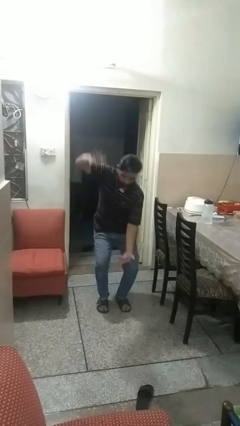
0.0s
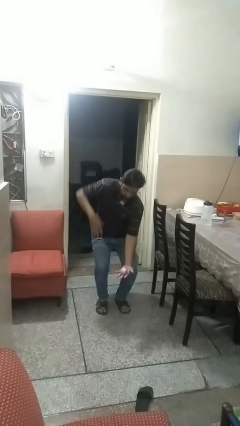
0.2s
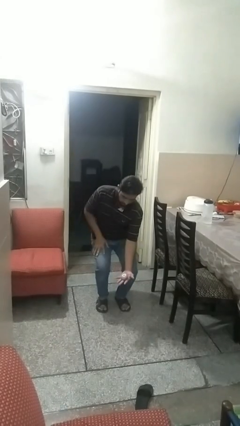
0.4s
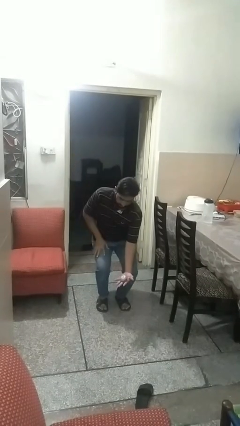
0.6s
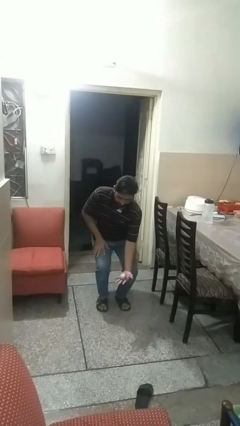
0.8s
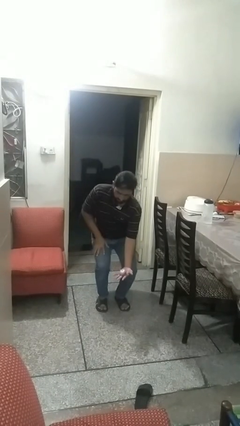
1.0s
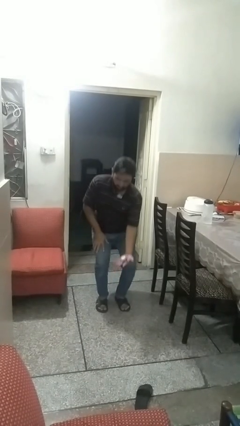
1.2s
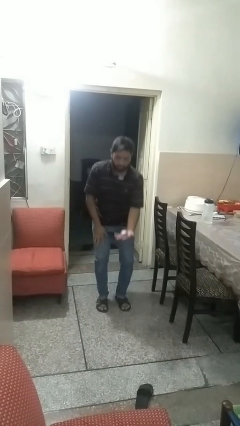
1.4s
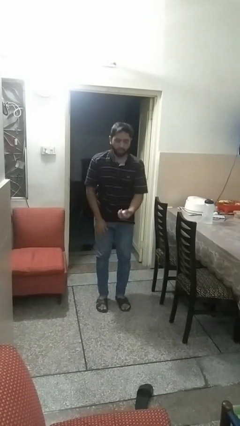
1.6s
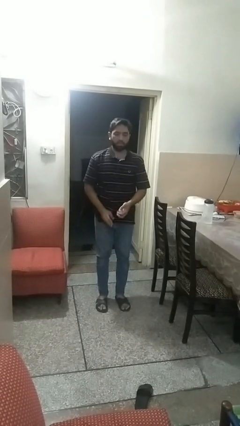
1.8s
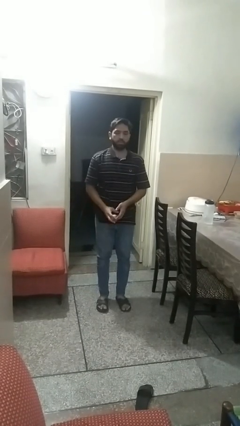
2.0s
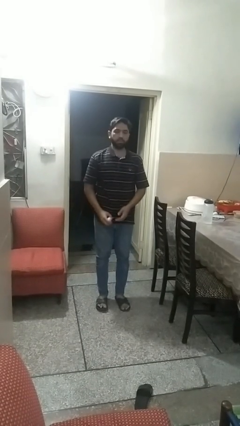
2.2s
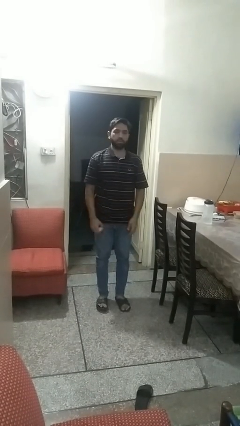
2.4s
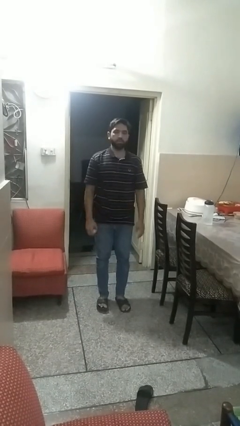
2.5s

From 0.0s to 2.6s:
person catches dropped object

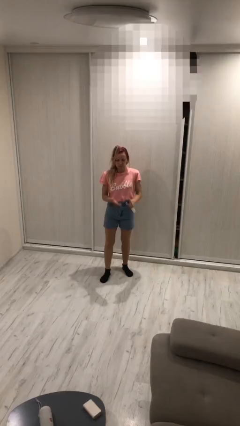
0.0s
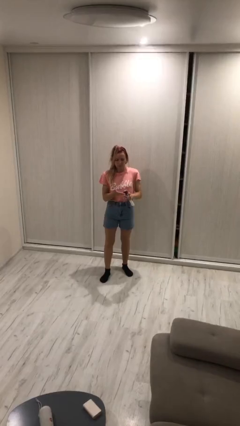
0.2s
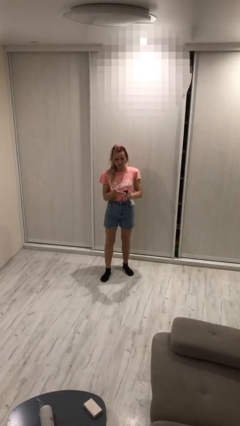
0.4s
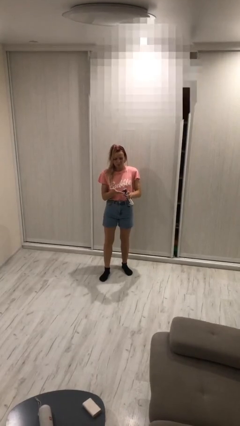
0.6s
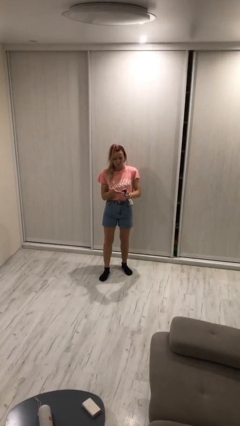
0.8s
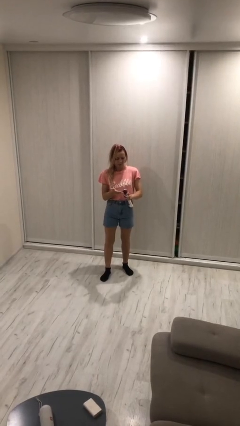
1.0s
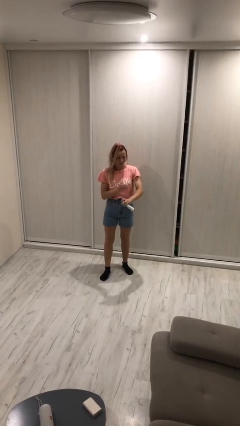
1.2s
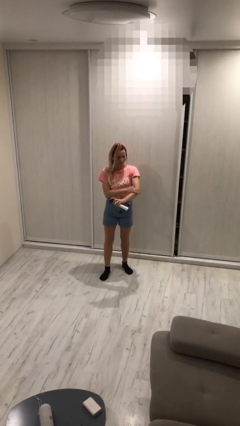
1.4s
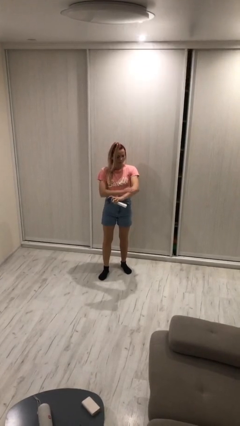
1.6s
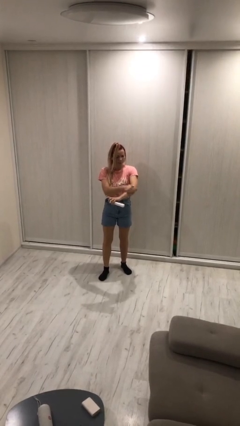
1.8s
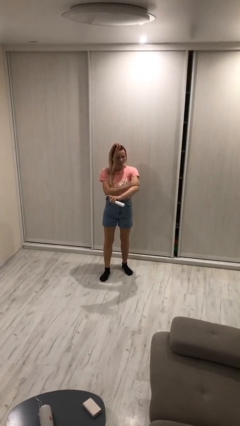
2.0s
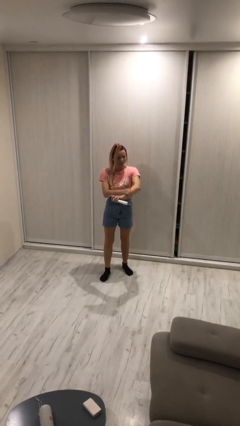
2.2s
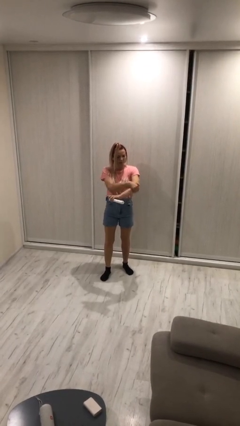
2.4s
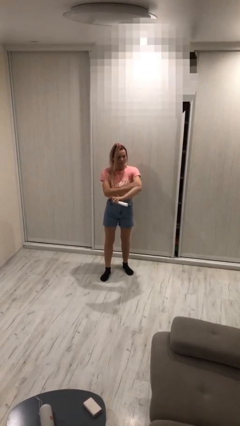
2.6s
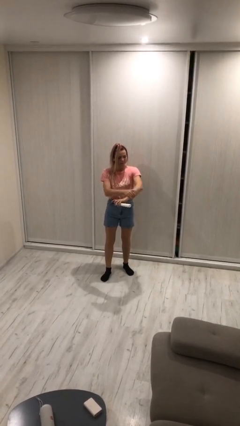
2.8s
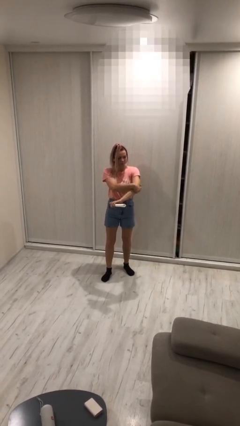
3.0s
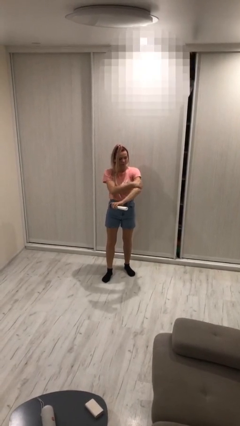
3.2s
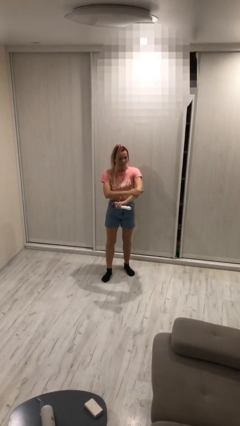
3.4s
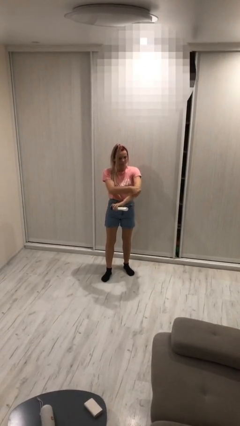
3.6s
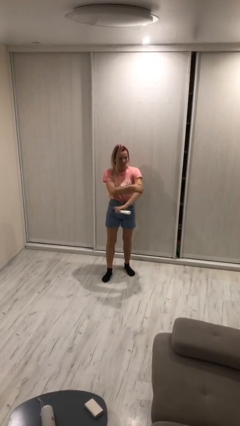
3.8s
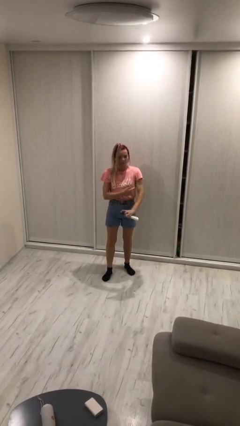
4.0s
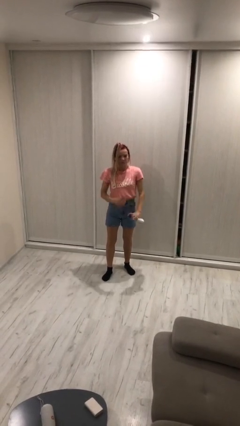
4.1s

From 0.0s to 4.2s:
person applies sunscreen

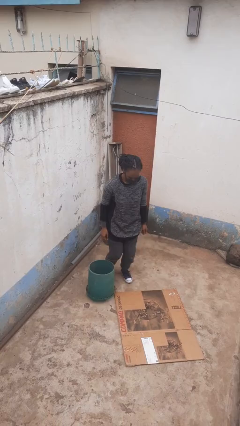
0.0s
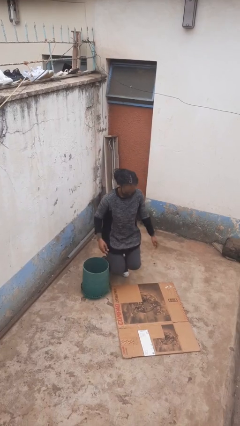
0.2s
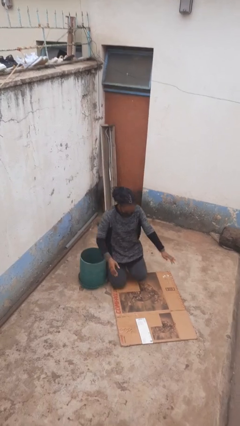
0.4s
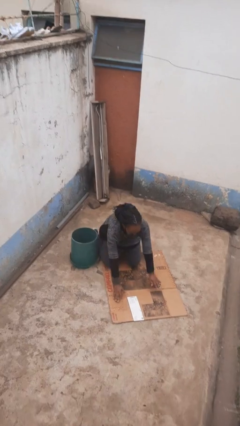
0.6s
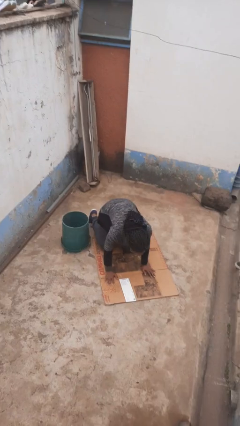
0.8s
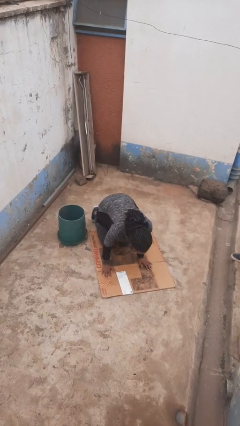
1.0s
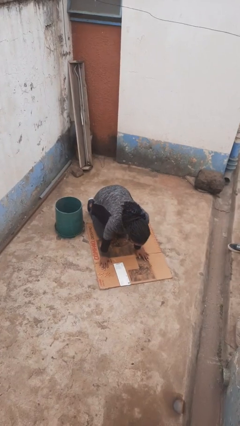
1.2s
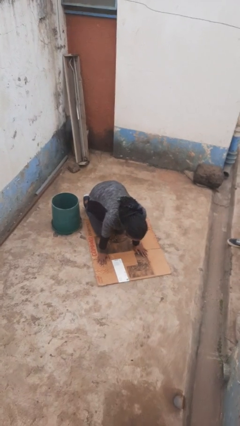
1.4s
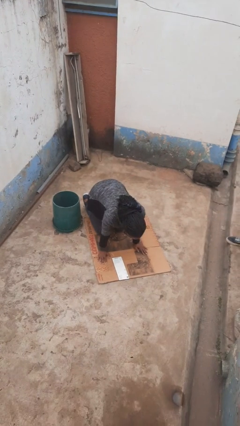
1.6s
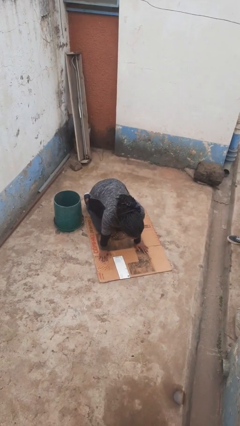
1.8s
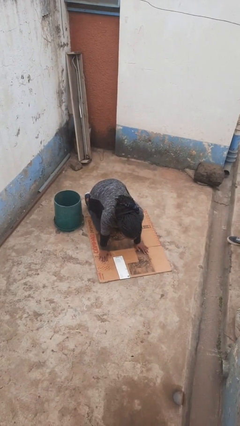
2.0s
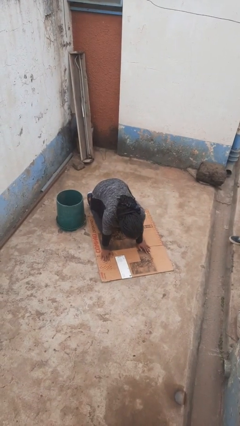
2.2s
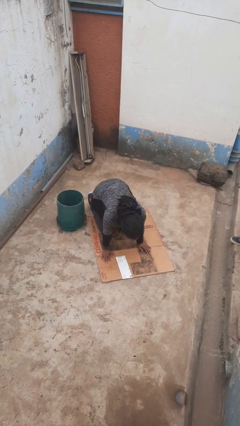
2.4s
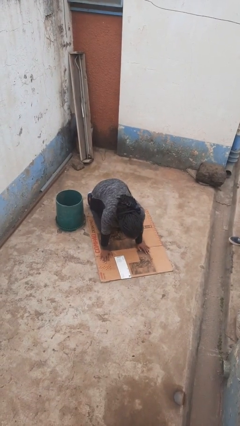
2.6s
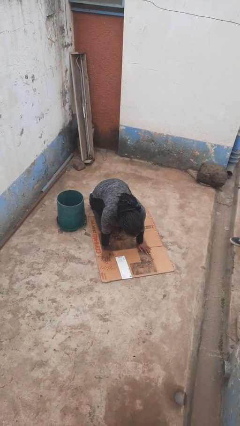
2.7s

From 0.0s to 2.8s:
person trips on object on floor

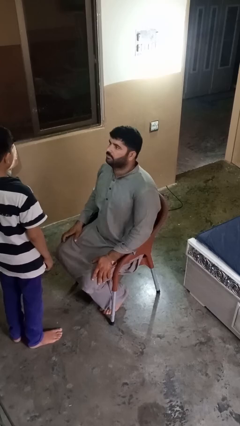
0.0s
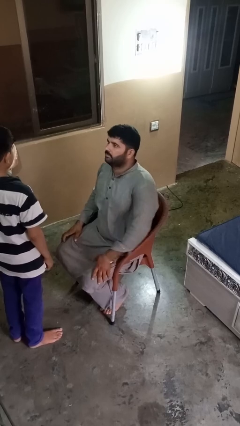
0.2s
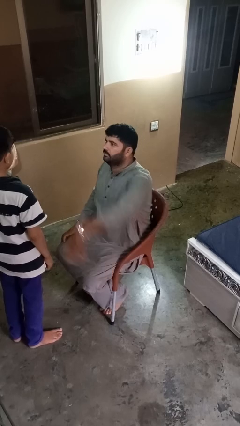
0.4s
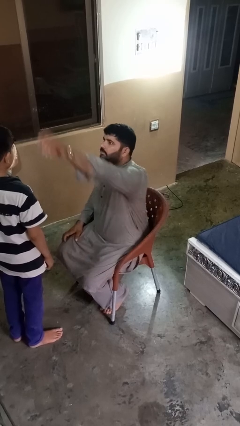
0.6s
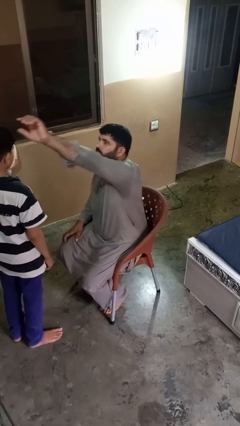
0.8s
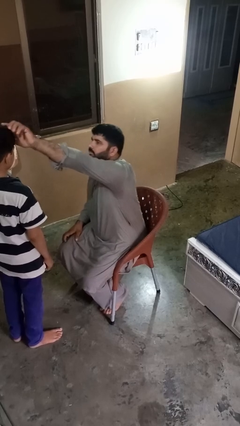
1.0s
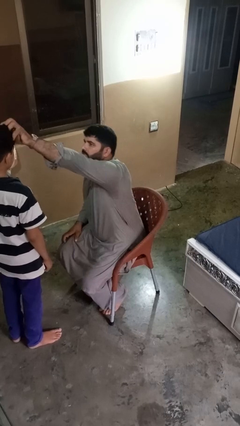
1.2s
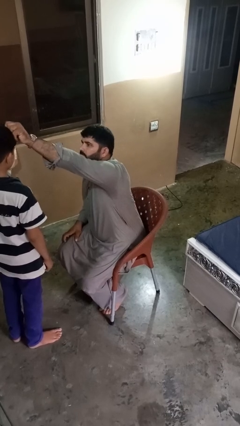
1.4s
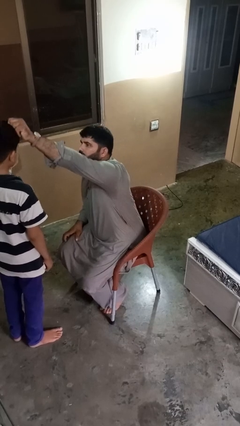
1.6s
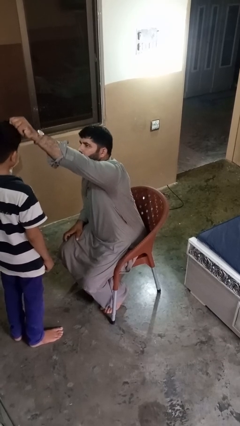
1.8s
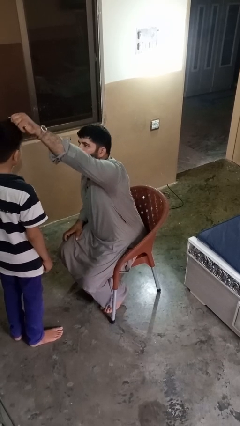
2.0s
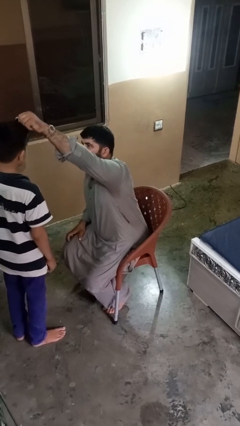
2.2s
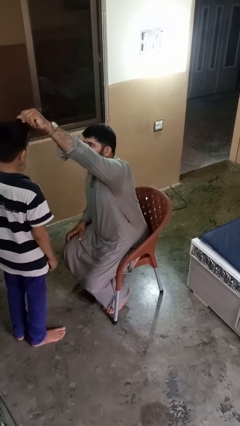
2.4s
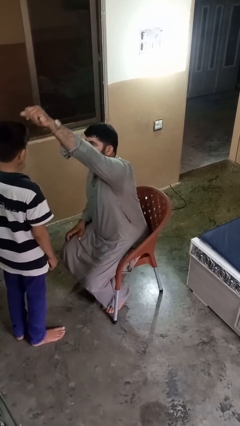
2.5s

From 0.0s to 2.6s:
person braids hair of person

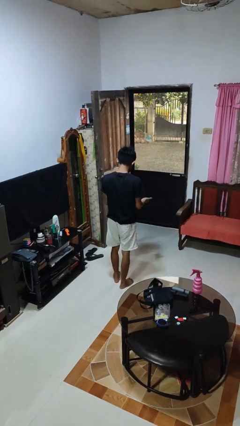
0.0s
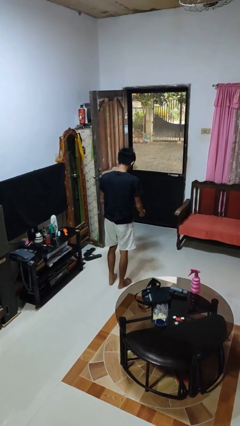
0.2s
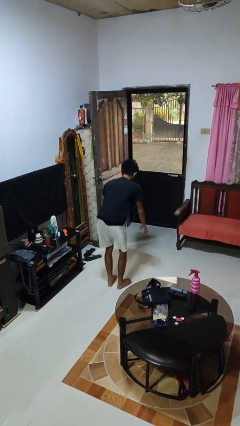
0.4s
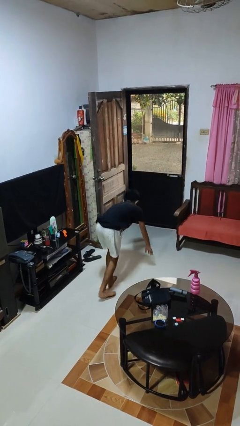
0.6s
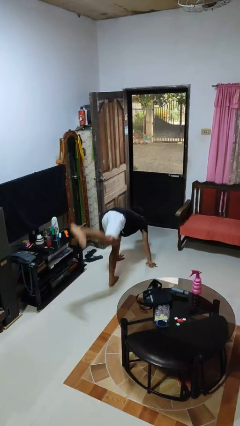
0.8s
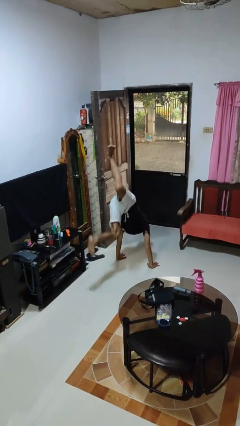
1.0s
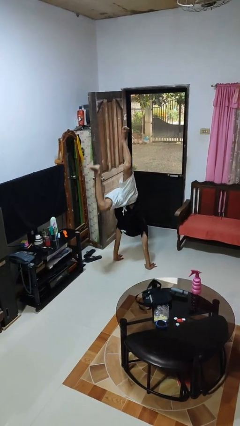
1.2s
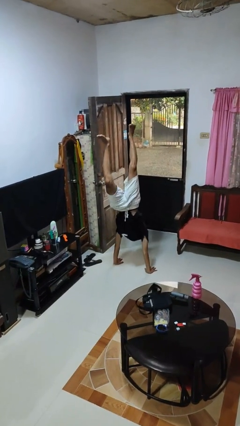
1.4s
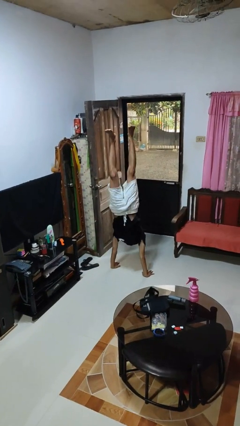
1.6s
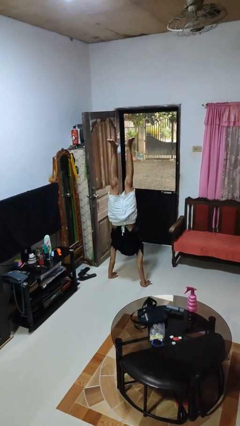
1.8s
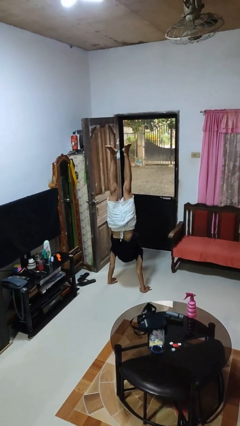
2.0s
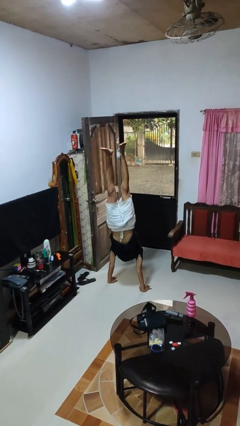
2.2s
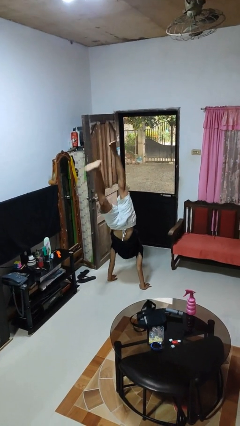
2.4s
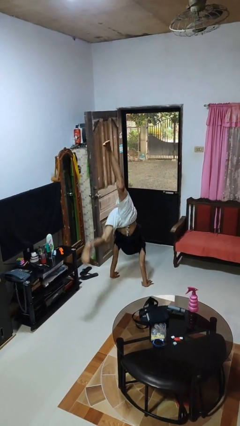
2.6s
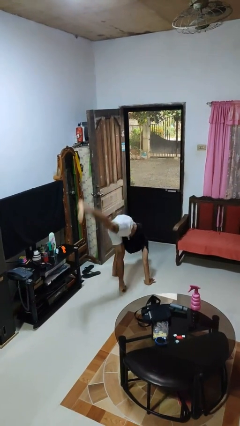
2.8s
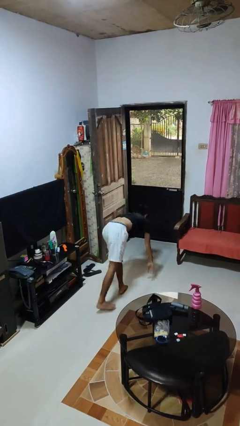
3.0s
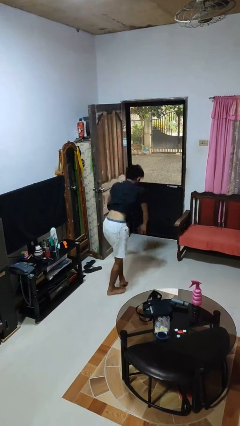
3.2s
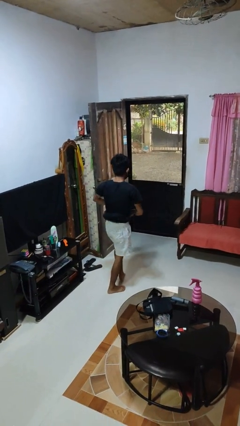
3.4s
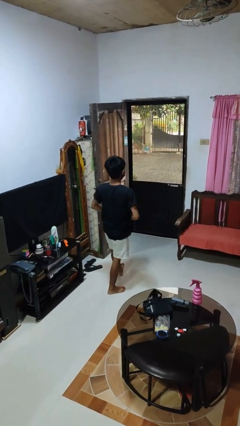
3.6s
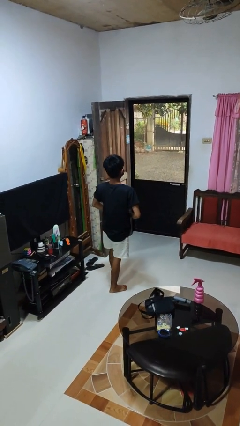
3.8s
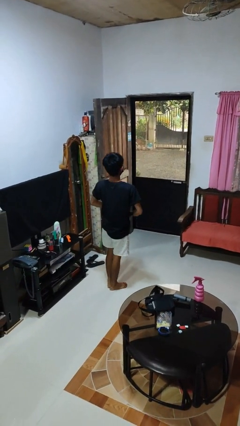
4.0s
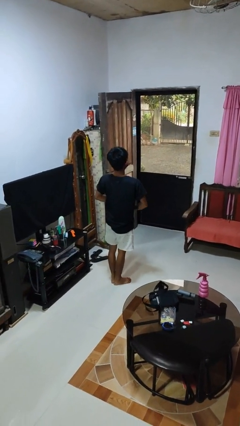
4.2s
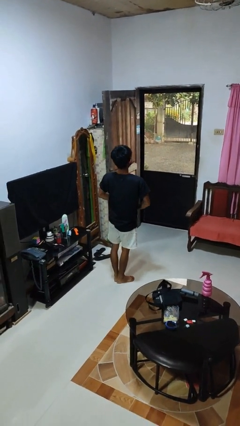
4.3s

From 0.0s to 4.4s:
person handstand

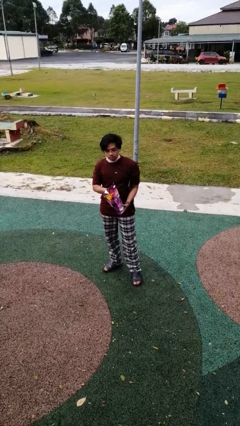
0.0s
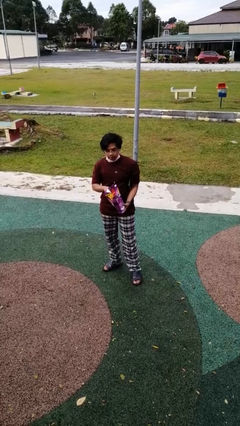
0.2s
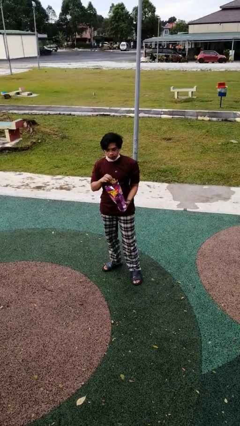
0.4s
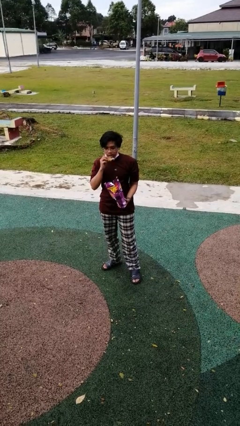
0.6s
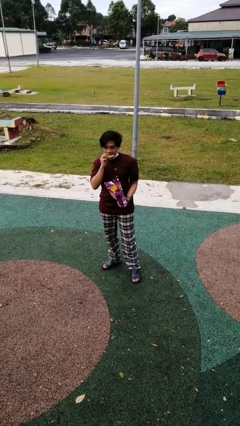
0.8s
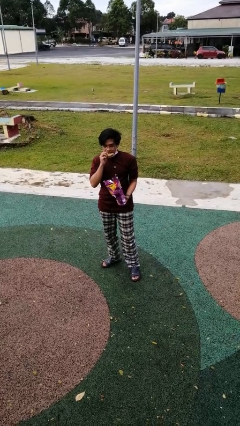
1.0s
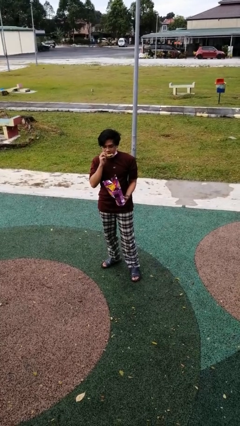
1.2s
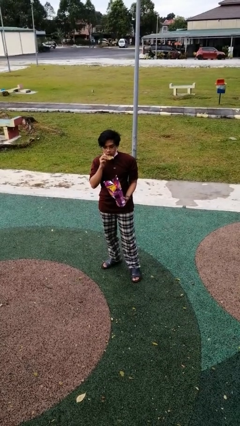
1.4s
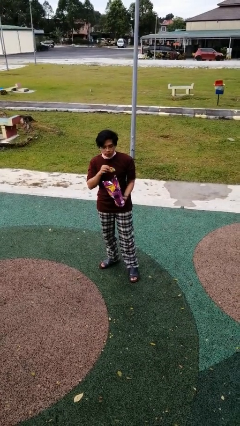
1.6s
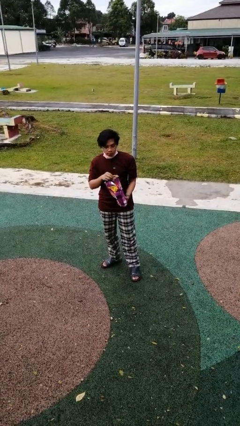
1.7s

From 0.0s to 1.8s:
person eats snack from bag
